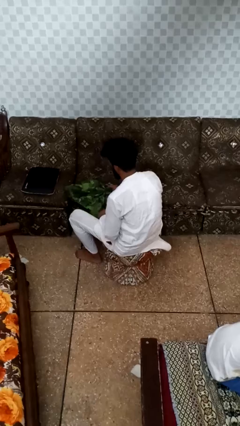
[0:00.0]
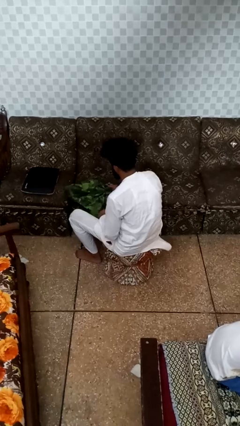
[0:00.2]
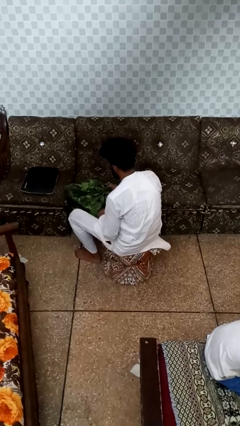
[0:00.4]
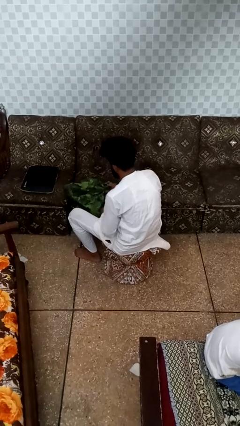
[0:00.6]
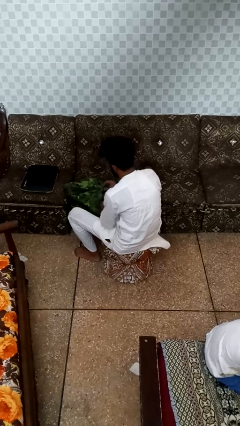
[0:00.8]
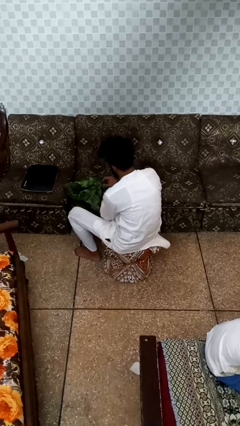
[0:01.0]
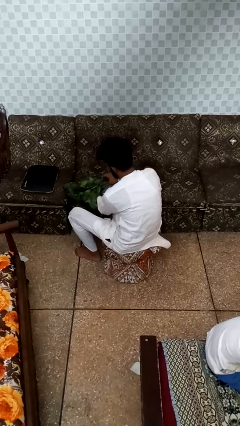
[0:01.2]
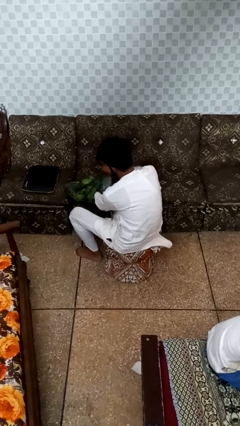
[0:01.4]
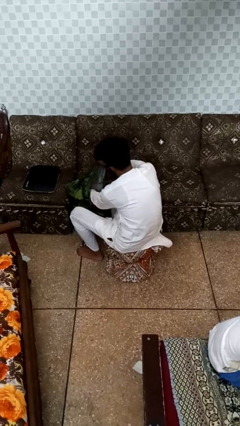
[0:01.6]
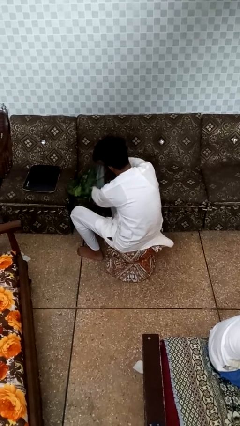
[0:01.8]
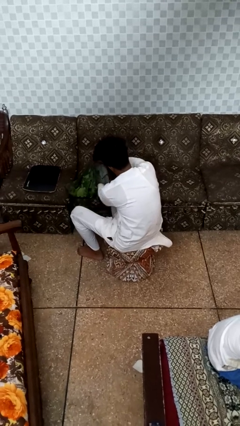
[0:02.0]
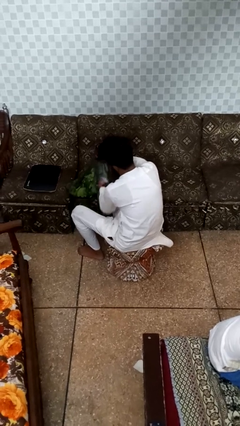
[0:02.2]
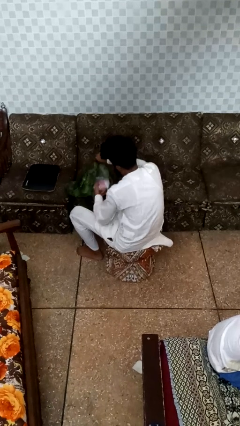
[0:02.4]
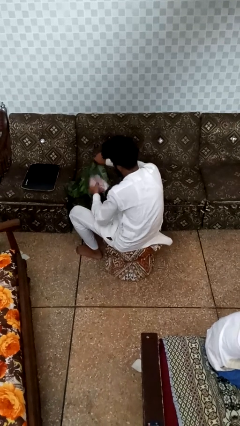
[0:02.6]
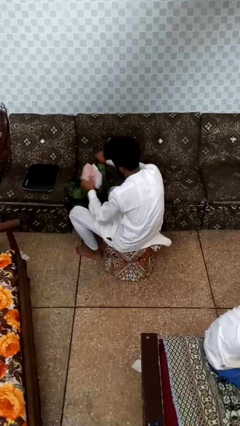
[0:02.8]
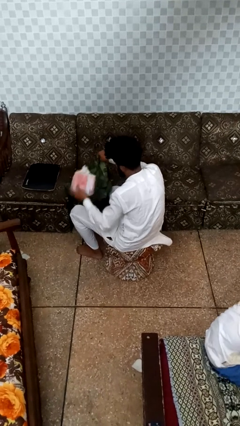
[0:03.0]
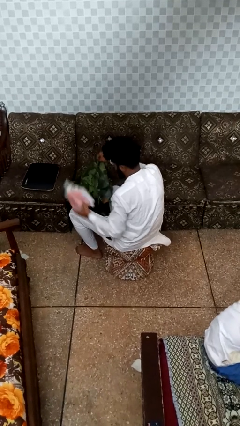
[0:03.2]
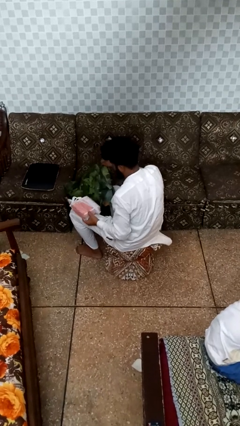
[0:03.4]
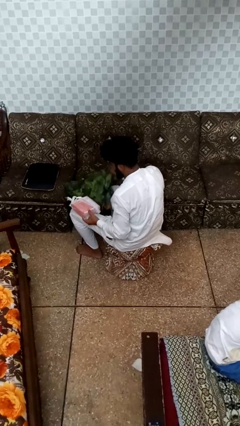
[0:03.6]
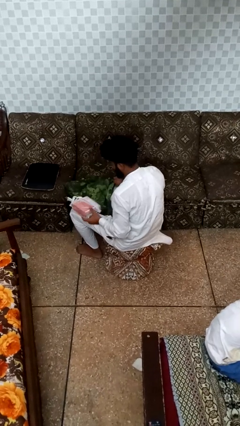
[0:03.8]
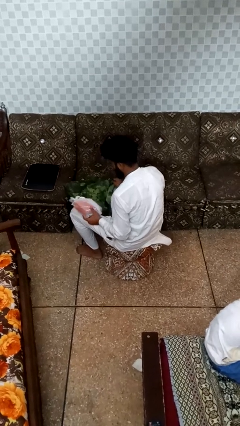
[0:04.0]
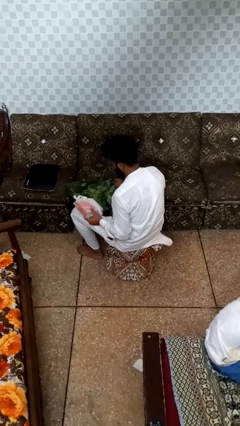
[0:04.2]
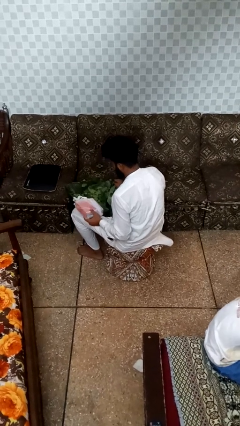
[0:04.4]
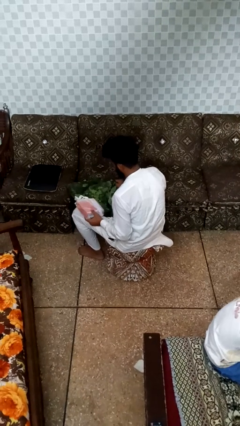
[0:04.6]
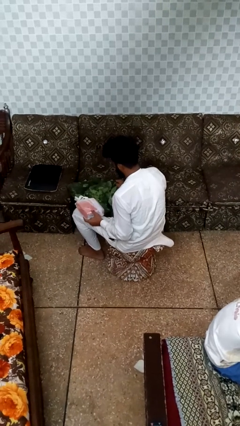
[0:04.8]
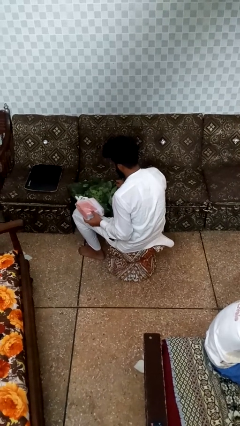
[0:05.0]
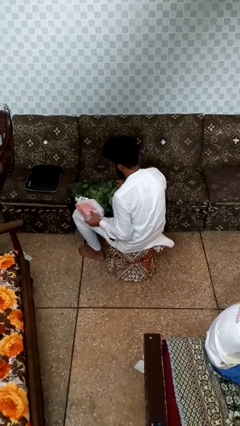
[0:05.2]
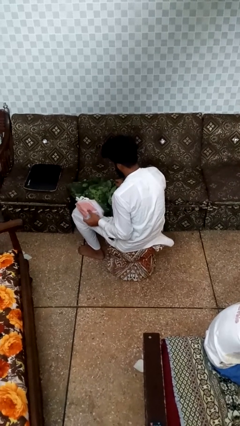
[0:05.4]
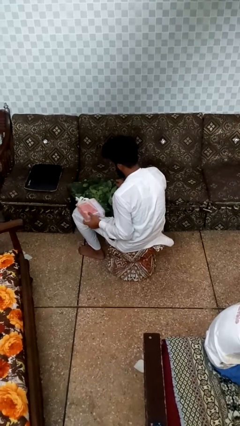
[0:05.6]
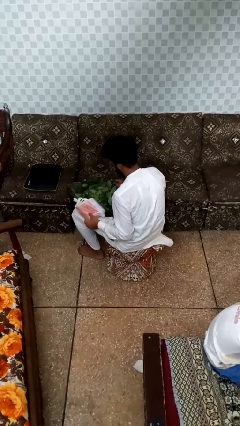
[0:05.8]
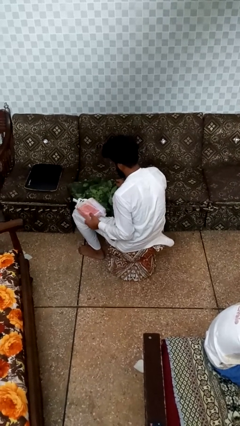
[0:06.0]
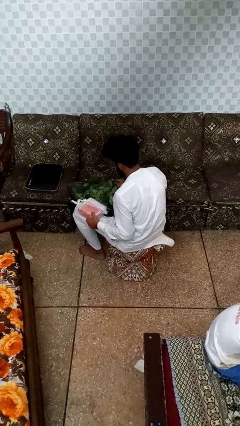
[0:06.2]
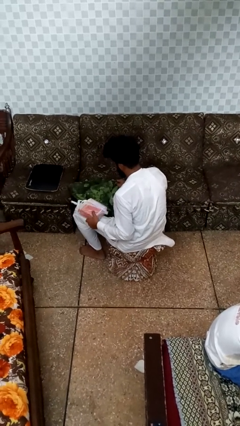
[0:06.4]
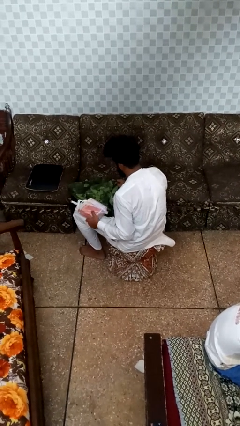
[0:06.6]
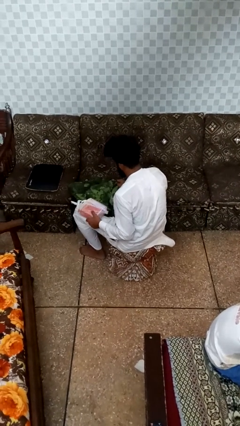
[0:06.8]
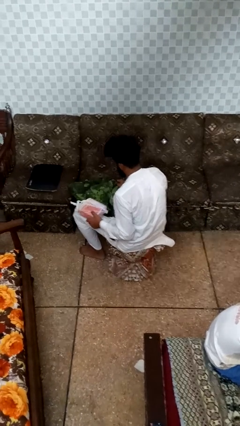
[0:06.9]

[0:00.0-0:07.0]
person takes object from bag

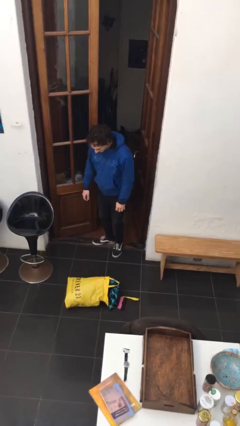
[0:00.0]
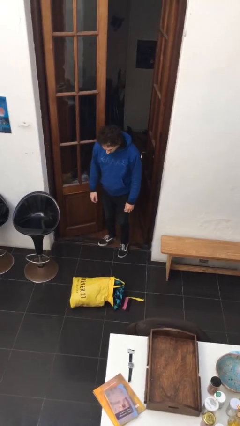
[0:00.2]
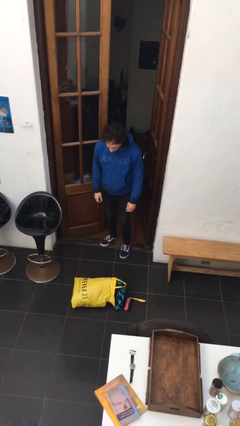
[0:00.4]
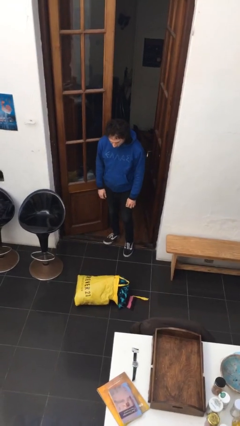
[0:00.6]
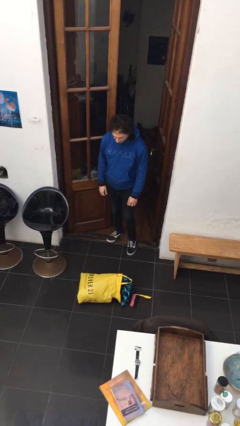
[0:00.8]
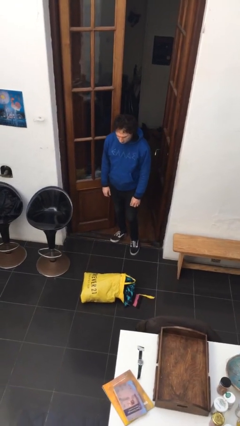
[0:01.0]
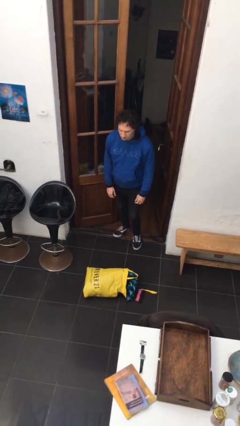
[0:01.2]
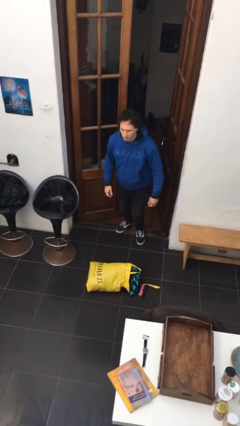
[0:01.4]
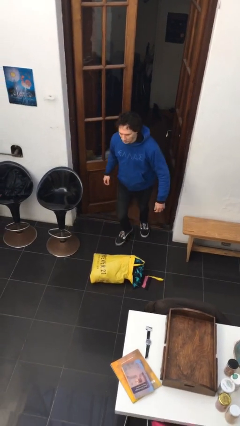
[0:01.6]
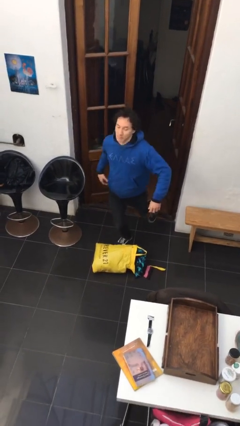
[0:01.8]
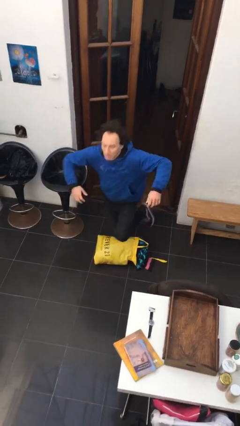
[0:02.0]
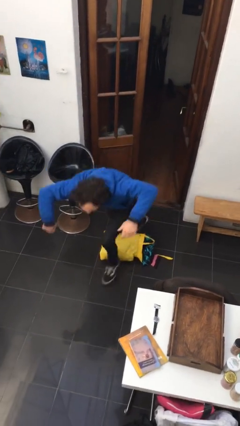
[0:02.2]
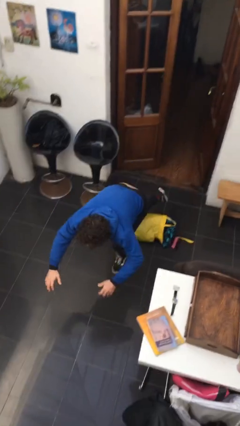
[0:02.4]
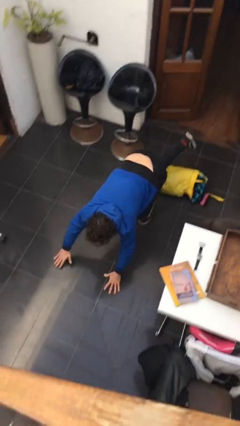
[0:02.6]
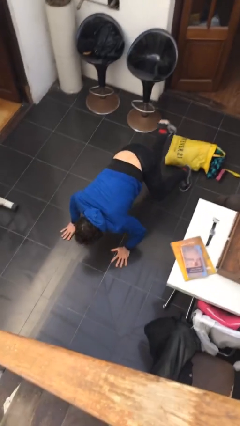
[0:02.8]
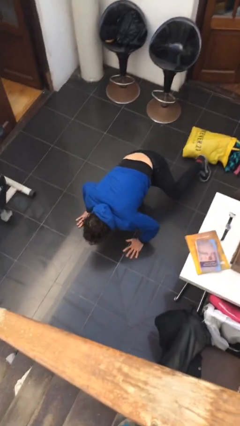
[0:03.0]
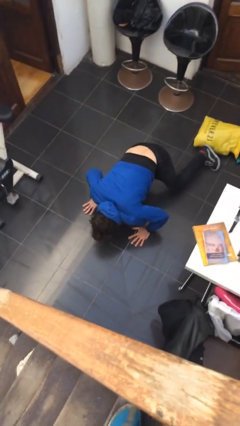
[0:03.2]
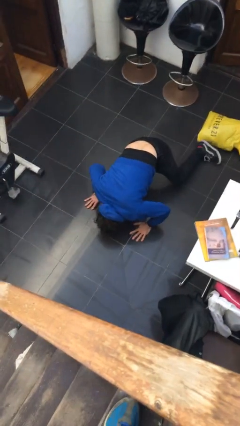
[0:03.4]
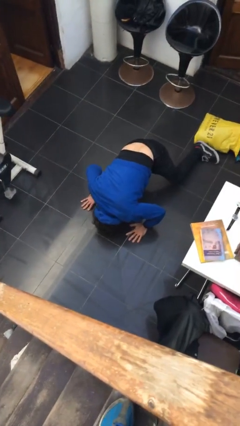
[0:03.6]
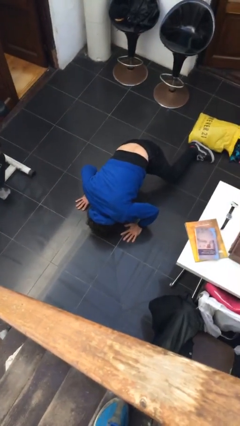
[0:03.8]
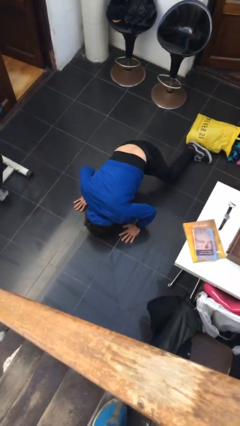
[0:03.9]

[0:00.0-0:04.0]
person trips on object on floor

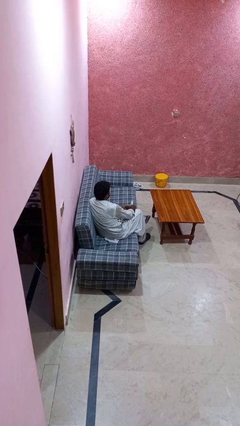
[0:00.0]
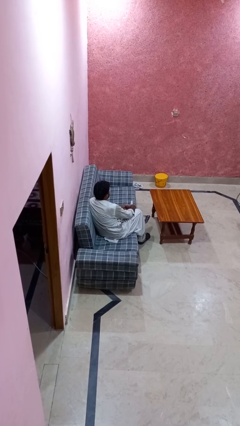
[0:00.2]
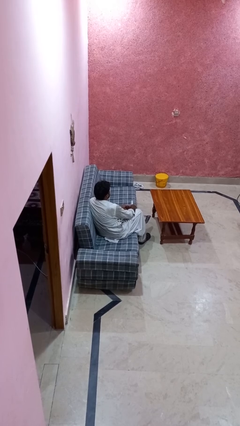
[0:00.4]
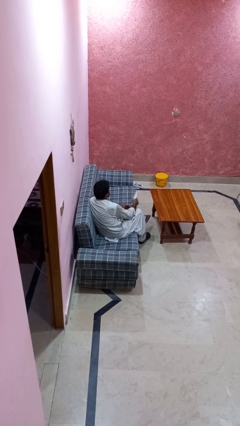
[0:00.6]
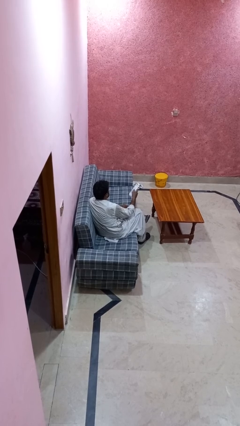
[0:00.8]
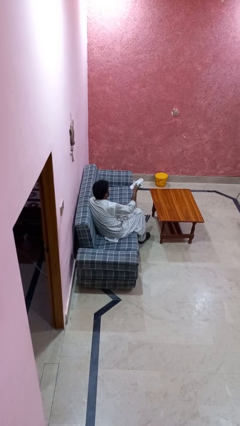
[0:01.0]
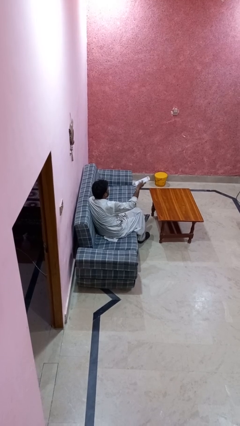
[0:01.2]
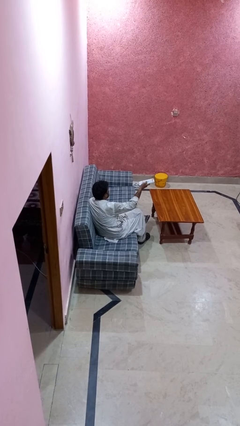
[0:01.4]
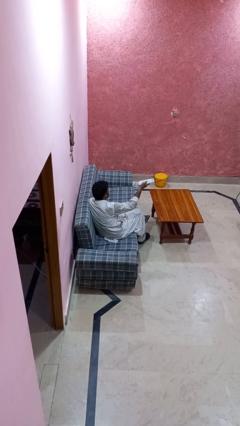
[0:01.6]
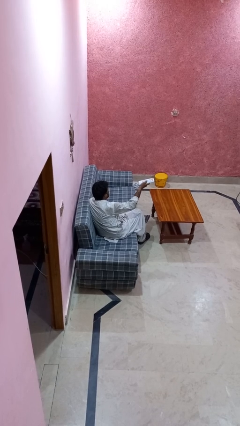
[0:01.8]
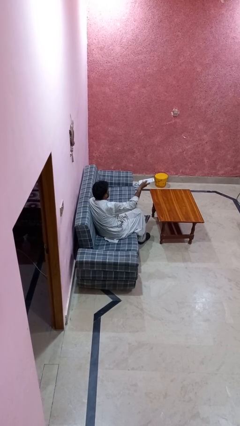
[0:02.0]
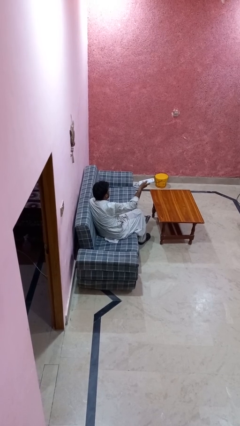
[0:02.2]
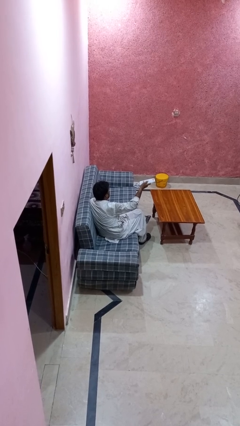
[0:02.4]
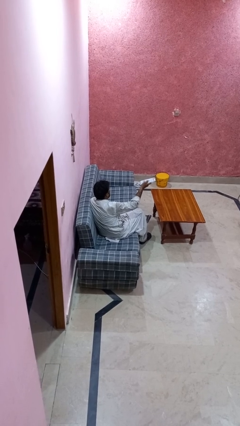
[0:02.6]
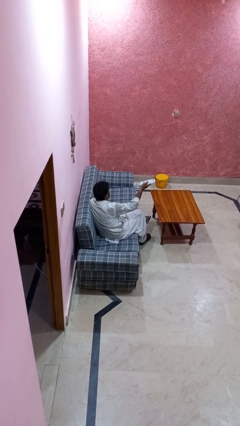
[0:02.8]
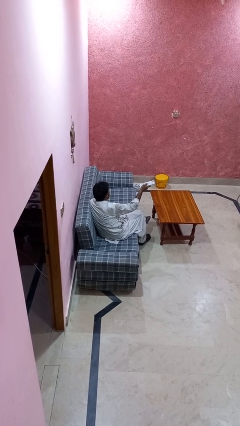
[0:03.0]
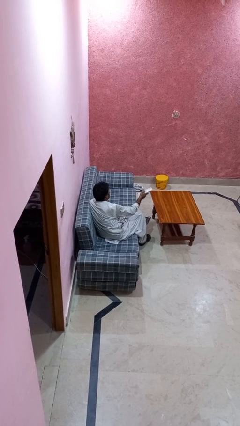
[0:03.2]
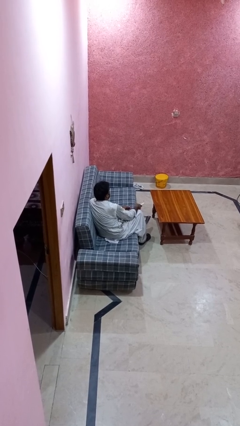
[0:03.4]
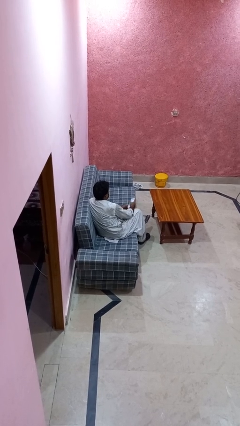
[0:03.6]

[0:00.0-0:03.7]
person uses television remote

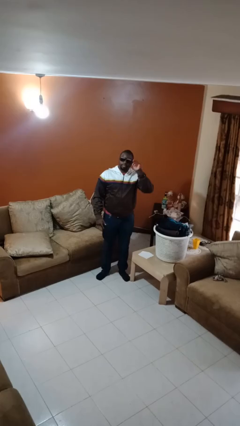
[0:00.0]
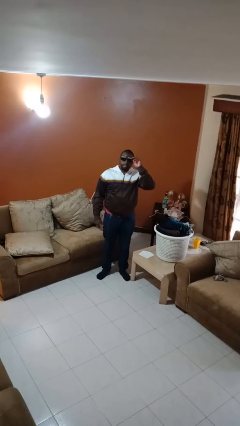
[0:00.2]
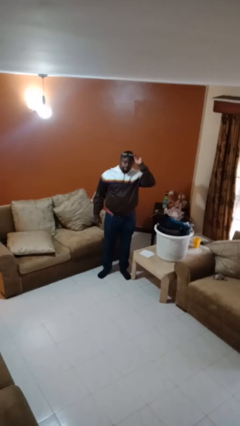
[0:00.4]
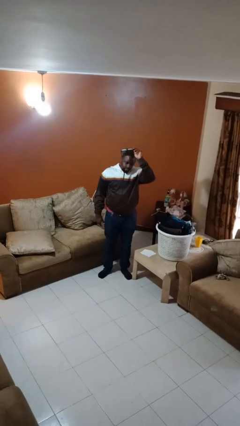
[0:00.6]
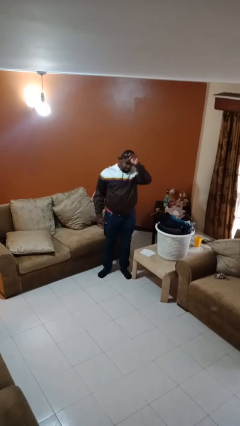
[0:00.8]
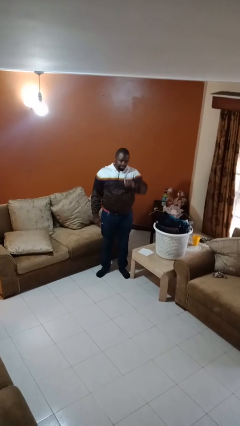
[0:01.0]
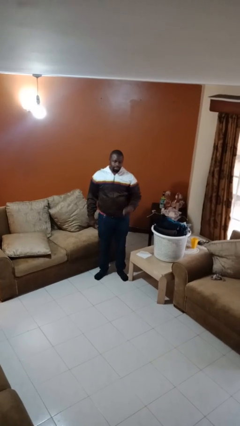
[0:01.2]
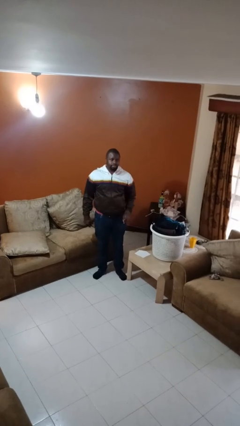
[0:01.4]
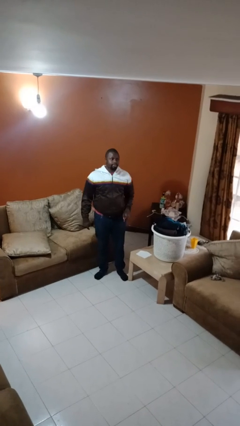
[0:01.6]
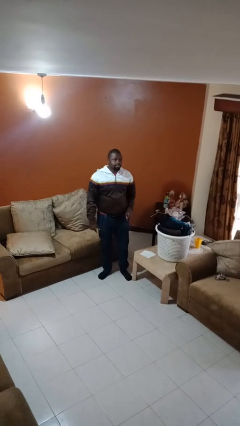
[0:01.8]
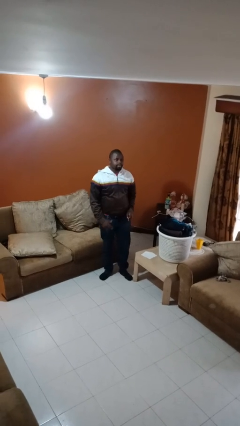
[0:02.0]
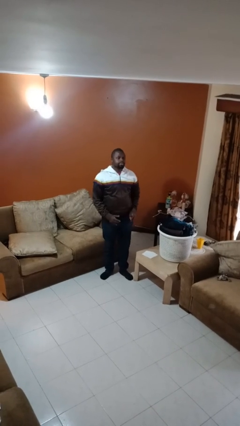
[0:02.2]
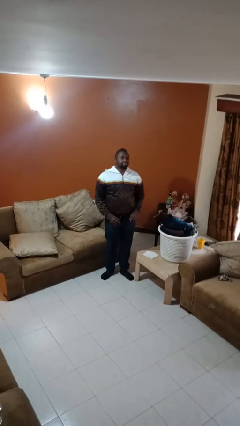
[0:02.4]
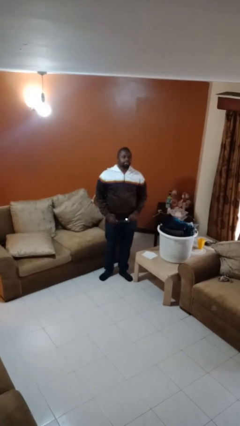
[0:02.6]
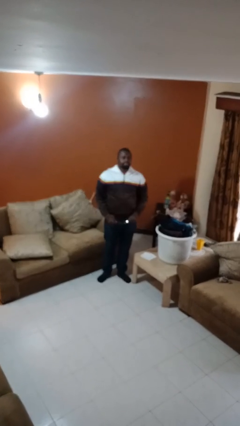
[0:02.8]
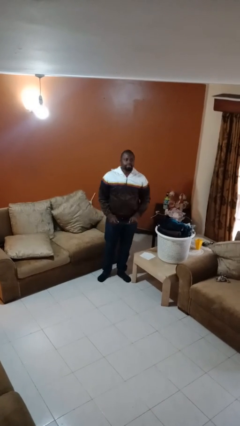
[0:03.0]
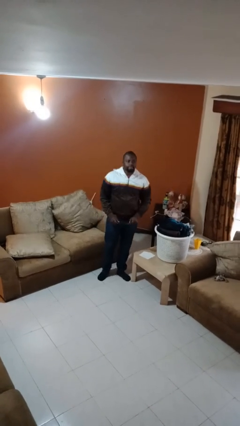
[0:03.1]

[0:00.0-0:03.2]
person takes off sunglasses
